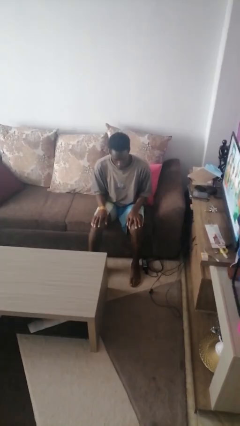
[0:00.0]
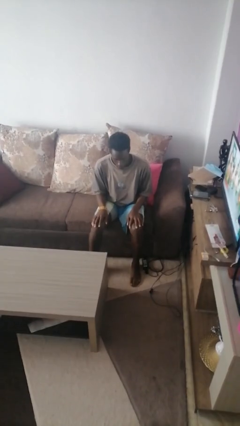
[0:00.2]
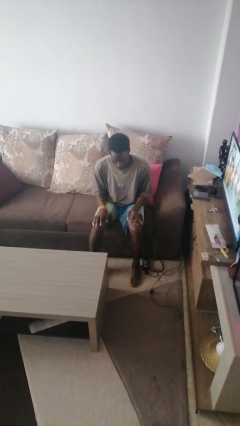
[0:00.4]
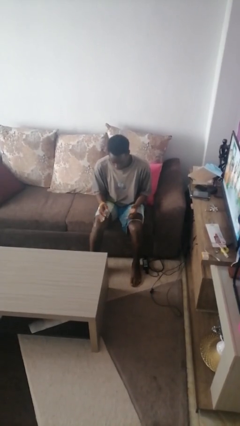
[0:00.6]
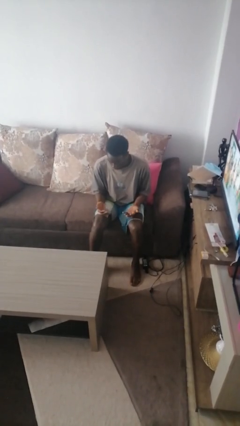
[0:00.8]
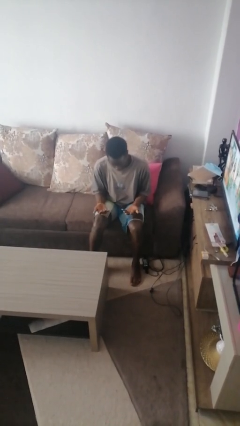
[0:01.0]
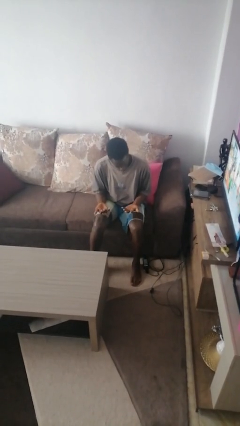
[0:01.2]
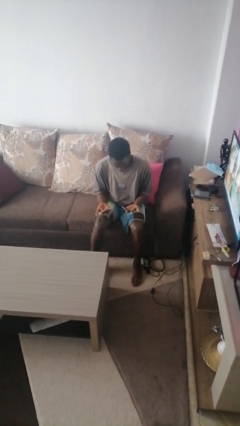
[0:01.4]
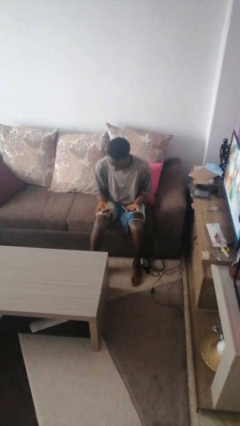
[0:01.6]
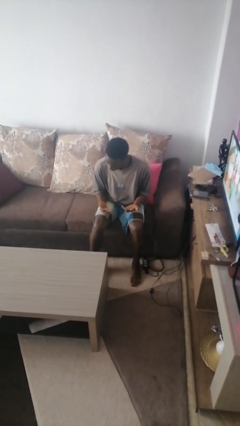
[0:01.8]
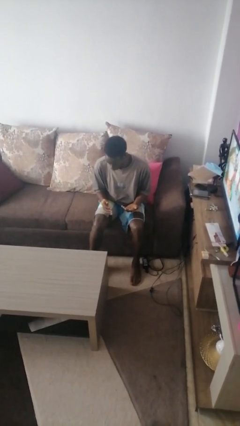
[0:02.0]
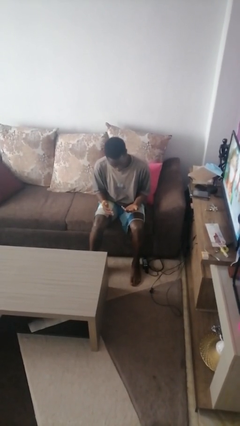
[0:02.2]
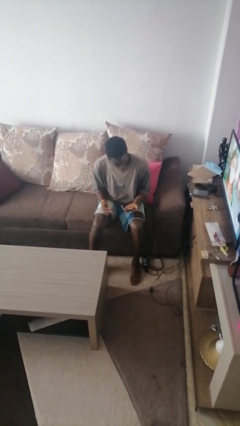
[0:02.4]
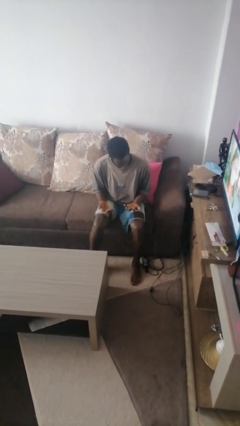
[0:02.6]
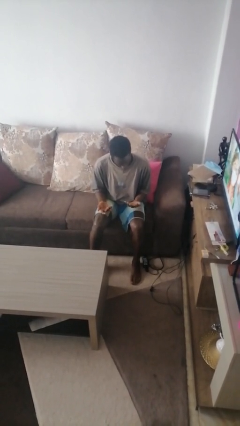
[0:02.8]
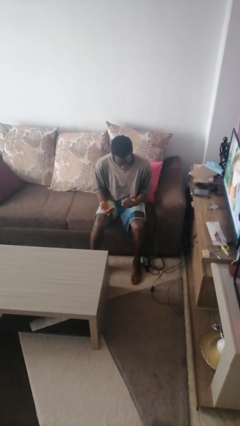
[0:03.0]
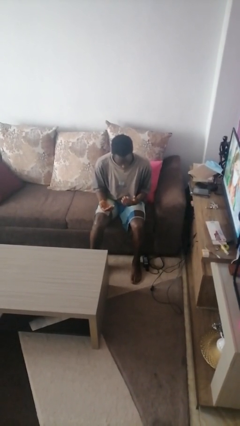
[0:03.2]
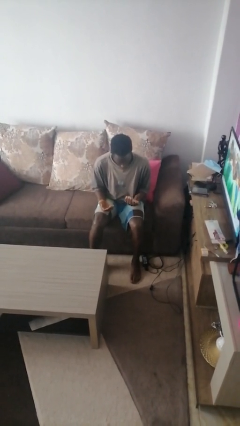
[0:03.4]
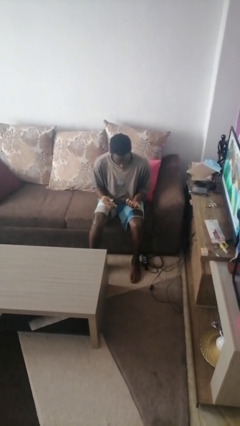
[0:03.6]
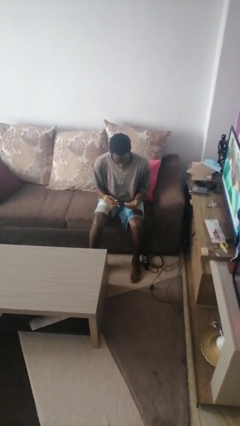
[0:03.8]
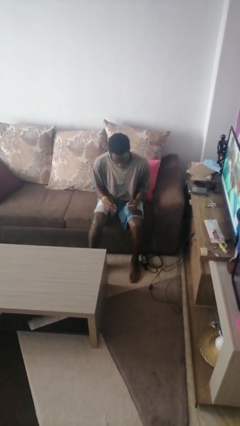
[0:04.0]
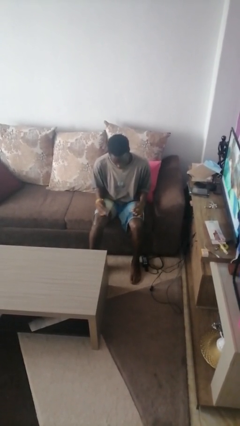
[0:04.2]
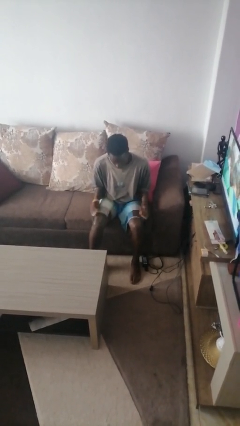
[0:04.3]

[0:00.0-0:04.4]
person looks at hands in lap

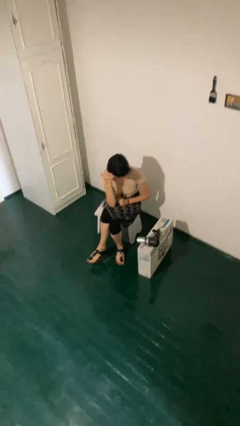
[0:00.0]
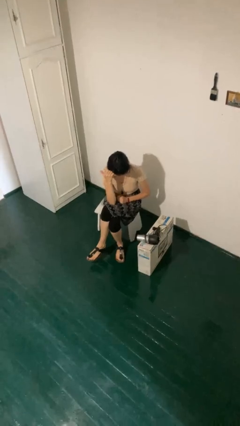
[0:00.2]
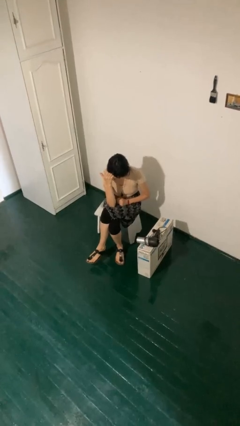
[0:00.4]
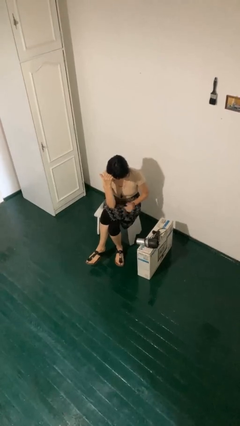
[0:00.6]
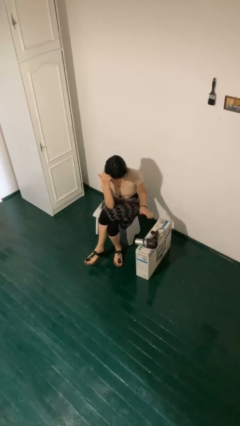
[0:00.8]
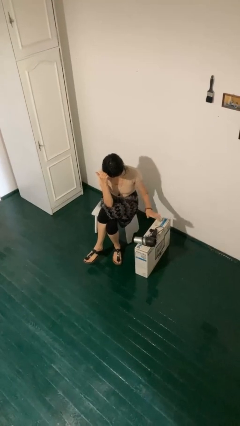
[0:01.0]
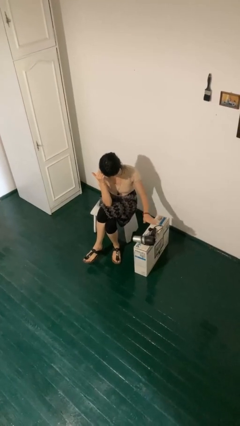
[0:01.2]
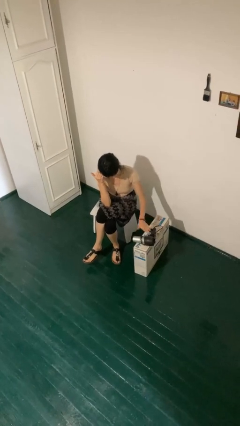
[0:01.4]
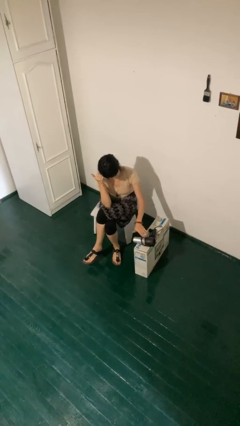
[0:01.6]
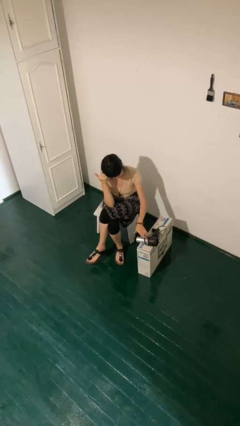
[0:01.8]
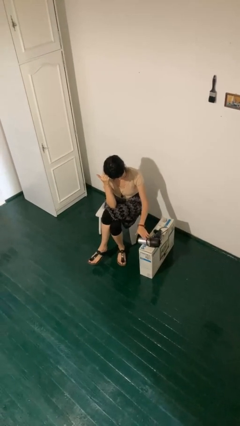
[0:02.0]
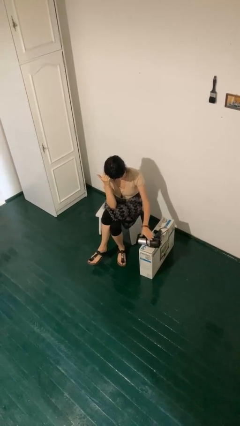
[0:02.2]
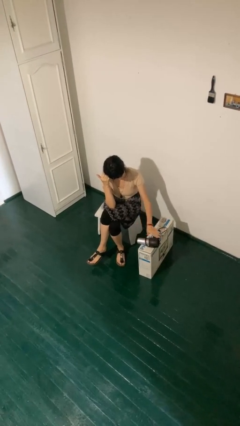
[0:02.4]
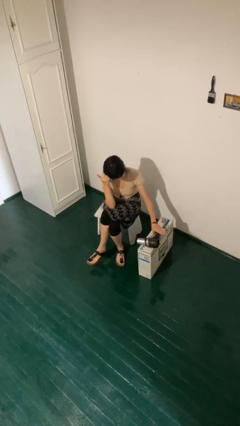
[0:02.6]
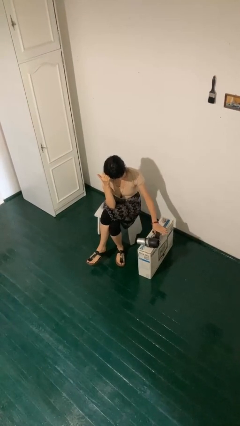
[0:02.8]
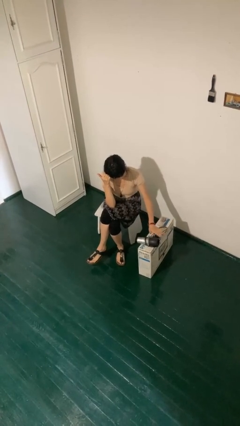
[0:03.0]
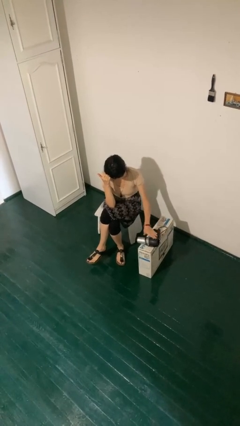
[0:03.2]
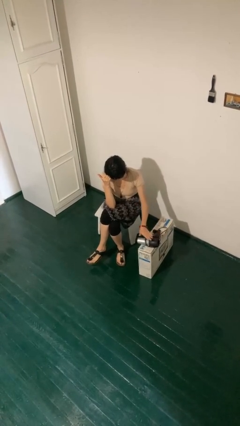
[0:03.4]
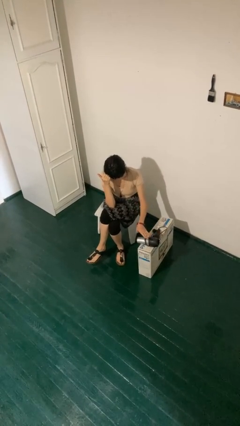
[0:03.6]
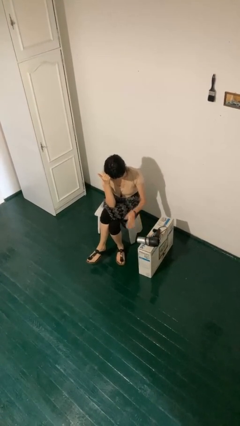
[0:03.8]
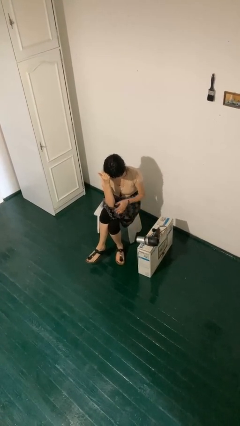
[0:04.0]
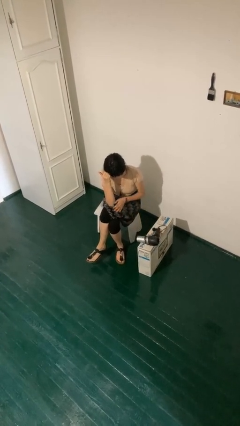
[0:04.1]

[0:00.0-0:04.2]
person waves hand over object

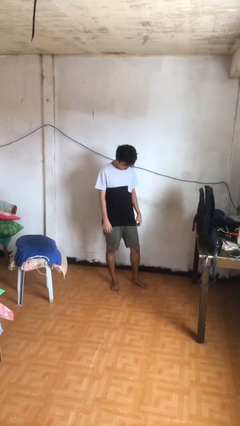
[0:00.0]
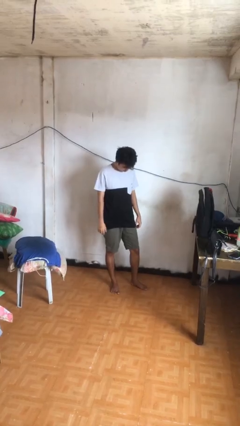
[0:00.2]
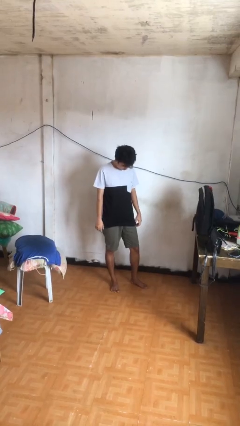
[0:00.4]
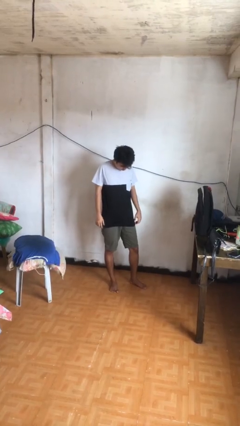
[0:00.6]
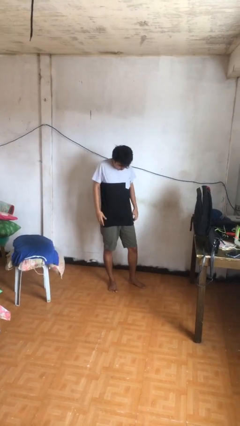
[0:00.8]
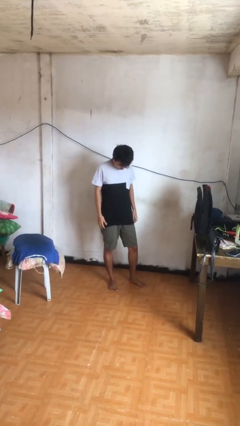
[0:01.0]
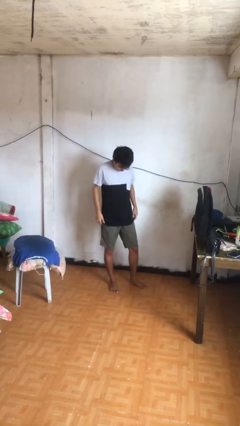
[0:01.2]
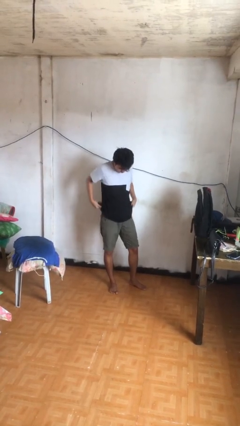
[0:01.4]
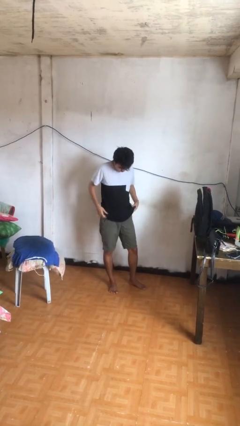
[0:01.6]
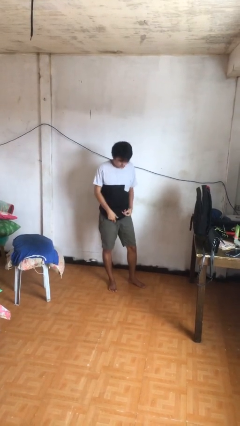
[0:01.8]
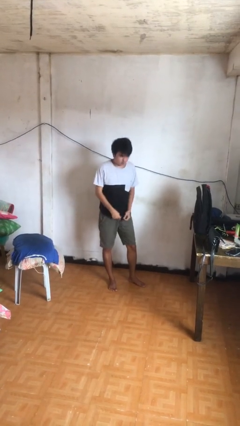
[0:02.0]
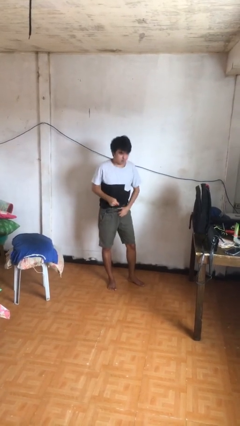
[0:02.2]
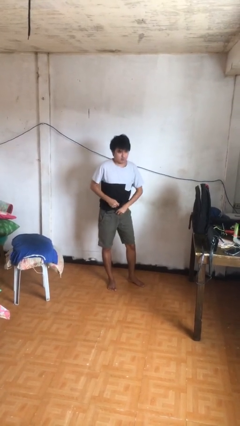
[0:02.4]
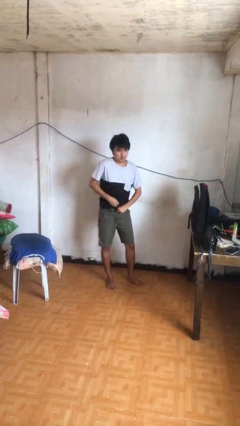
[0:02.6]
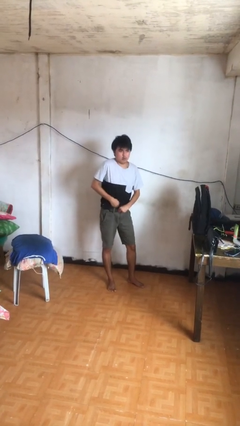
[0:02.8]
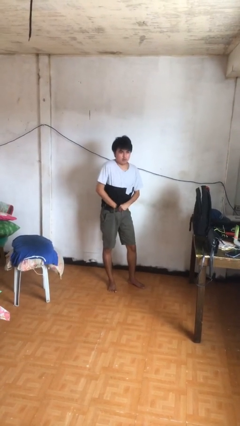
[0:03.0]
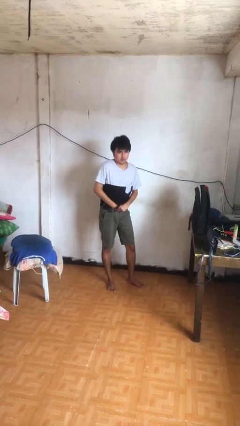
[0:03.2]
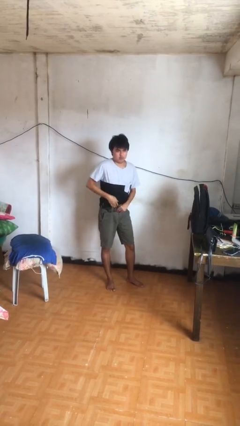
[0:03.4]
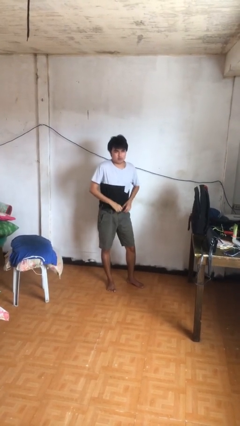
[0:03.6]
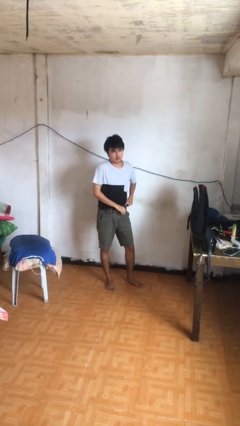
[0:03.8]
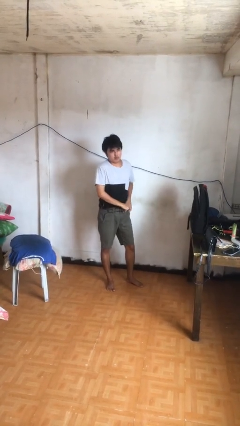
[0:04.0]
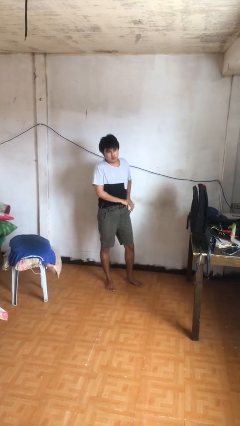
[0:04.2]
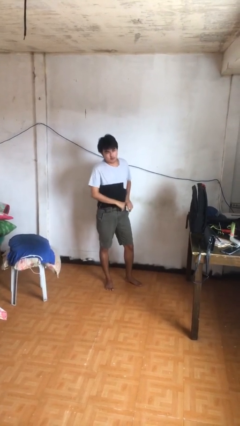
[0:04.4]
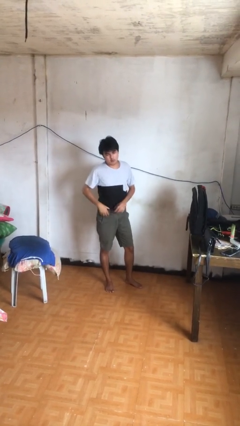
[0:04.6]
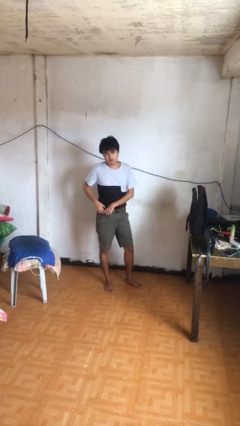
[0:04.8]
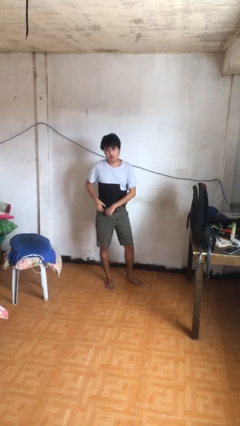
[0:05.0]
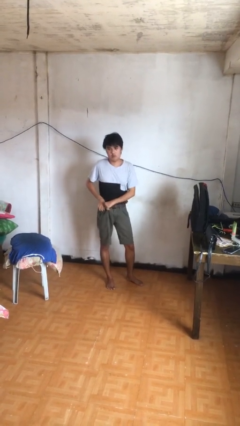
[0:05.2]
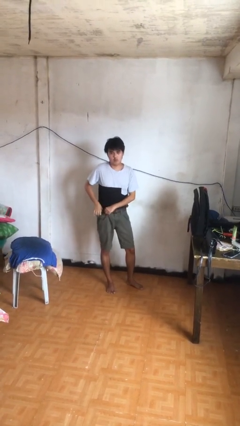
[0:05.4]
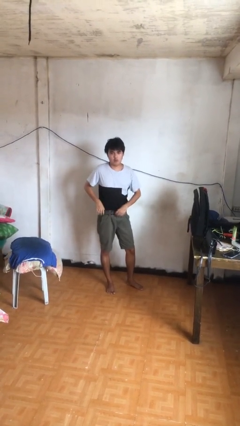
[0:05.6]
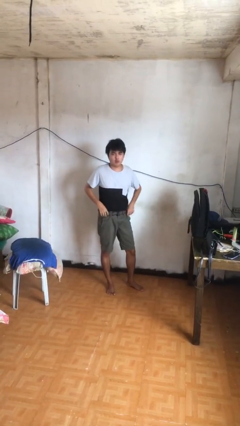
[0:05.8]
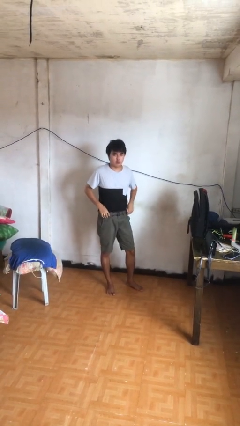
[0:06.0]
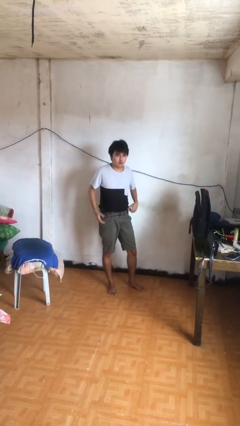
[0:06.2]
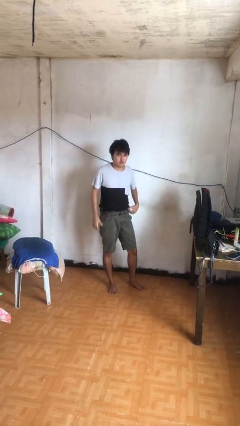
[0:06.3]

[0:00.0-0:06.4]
person tucks in shirt

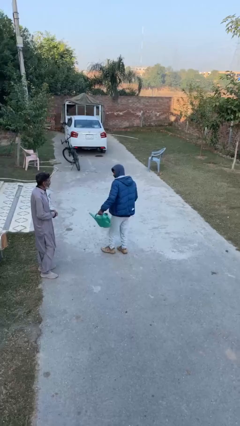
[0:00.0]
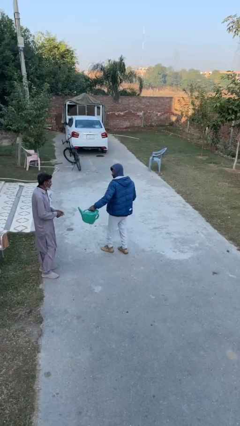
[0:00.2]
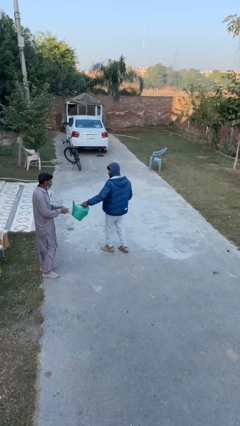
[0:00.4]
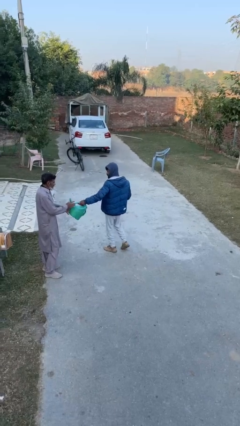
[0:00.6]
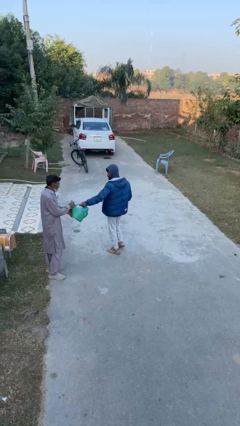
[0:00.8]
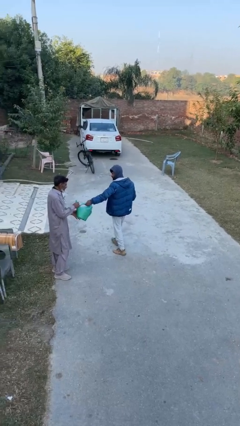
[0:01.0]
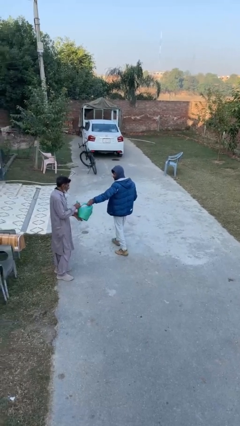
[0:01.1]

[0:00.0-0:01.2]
person transfers object to person

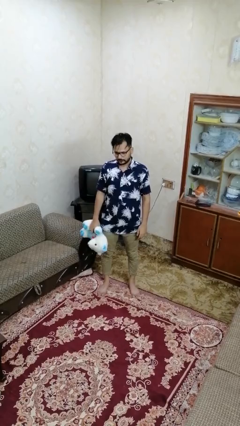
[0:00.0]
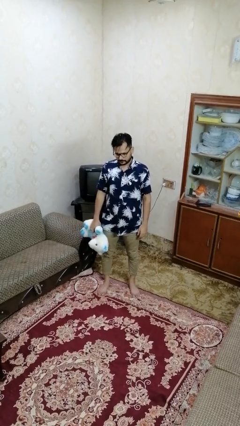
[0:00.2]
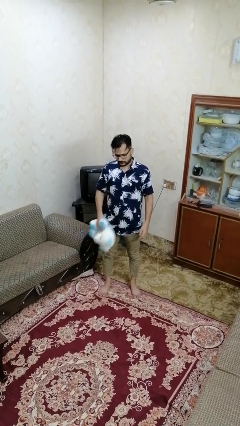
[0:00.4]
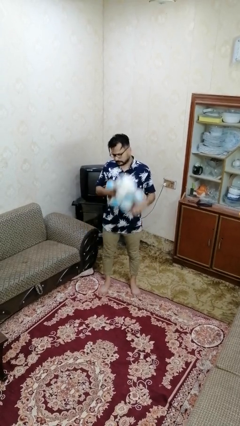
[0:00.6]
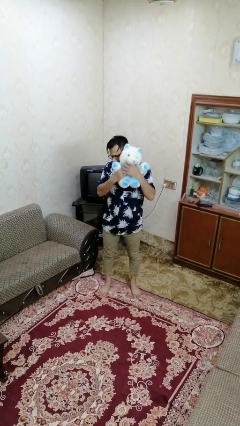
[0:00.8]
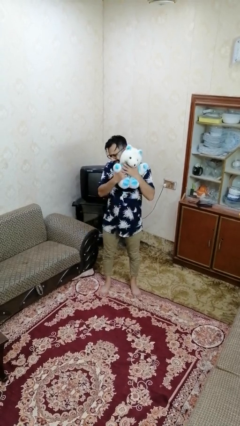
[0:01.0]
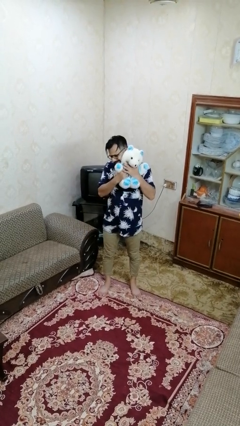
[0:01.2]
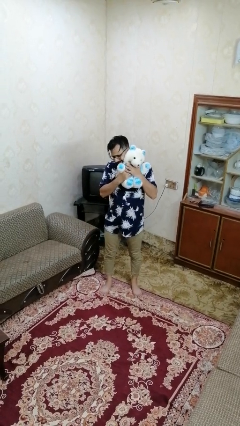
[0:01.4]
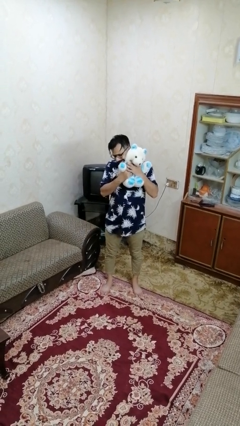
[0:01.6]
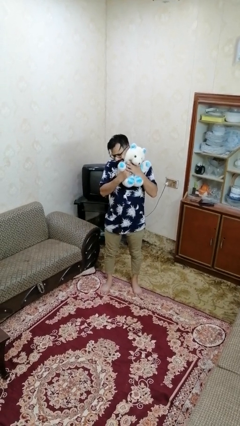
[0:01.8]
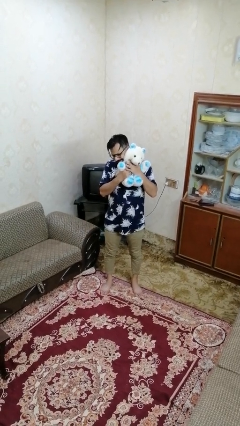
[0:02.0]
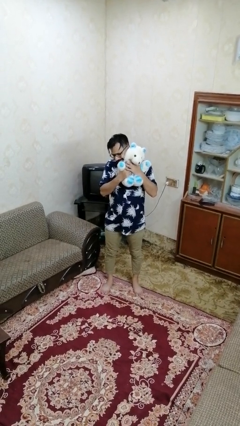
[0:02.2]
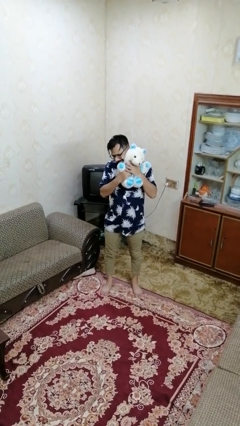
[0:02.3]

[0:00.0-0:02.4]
person hugs stuffed animal
